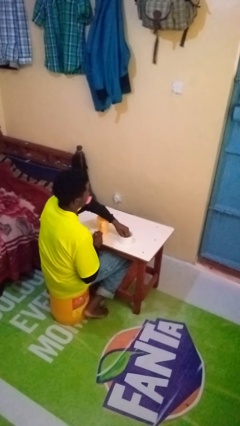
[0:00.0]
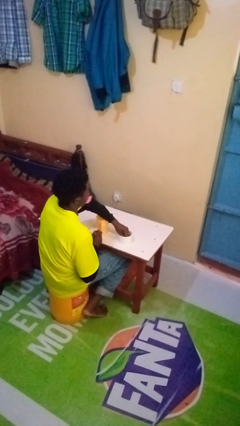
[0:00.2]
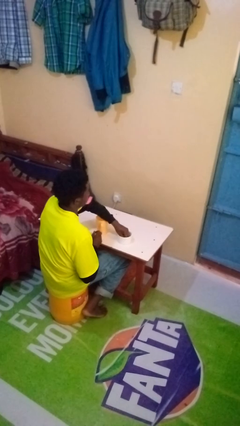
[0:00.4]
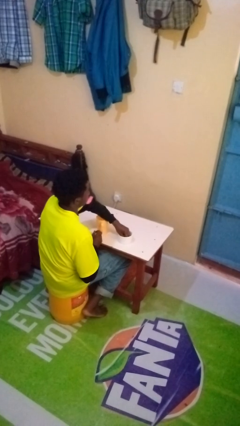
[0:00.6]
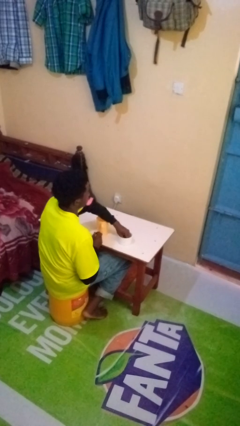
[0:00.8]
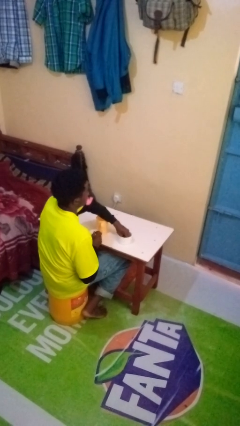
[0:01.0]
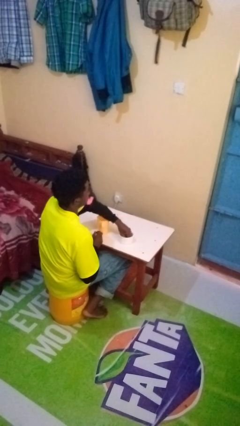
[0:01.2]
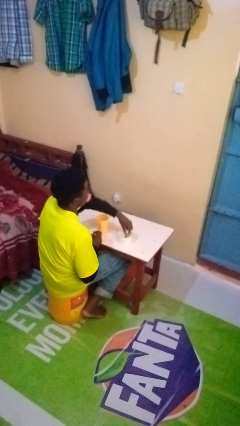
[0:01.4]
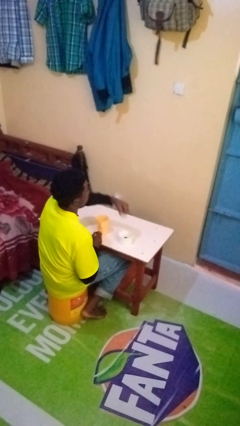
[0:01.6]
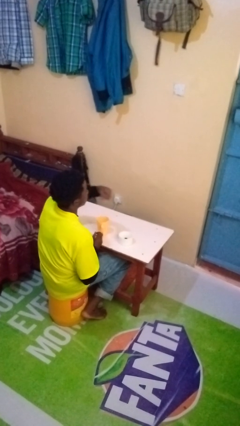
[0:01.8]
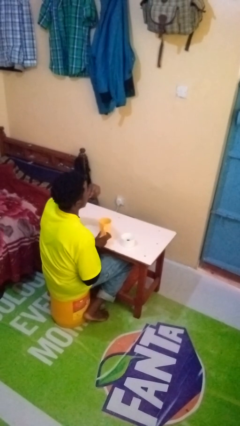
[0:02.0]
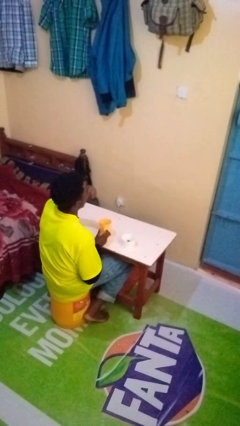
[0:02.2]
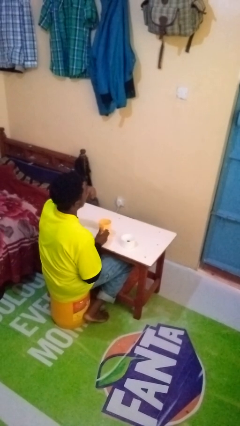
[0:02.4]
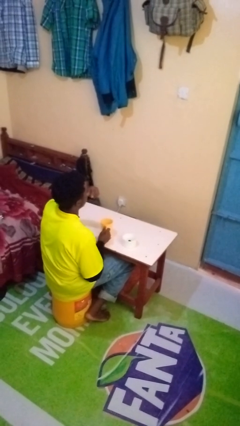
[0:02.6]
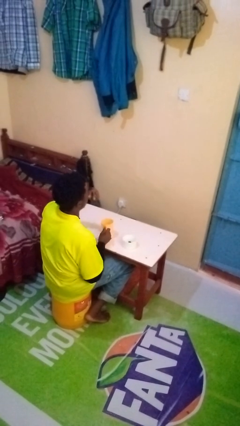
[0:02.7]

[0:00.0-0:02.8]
person takes medicine pills

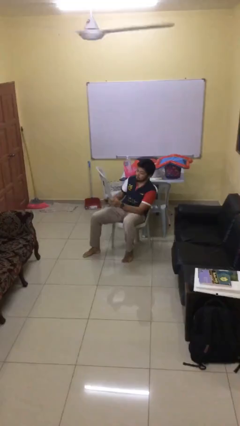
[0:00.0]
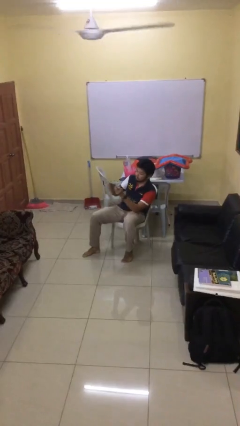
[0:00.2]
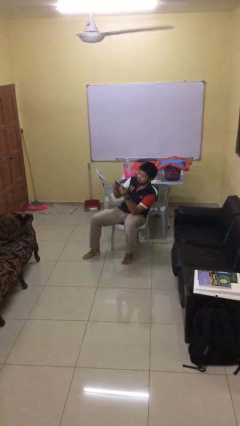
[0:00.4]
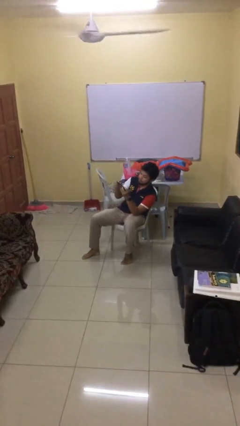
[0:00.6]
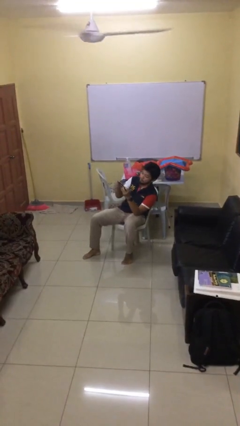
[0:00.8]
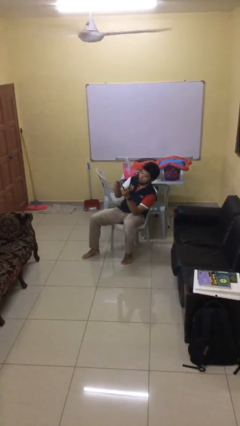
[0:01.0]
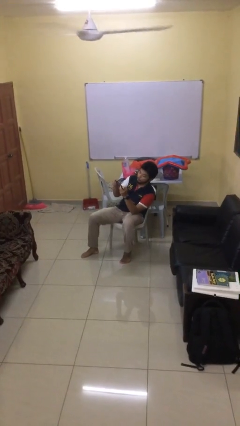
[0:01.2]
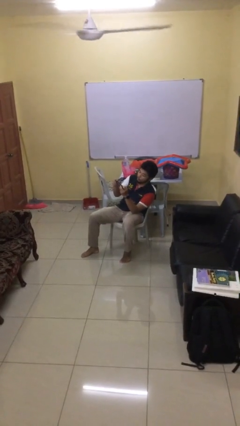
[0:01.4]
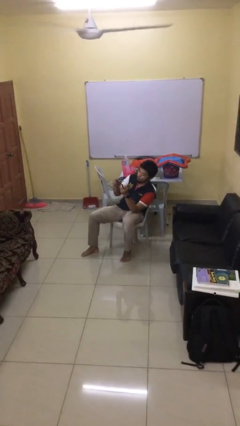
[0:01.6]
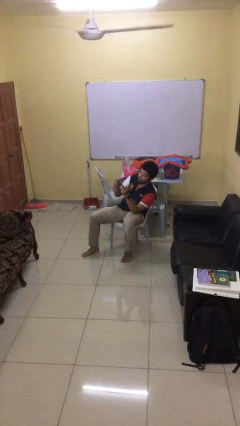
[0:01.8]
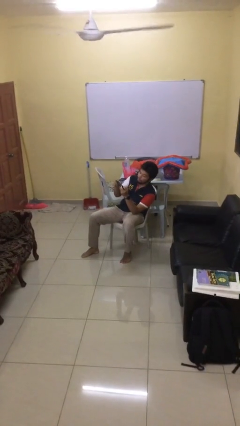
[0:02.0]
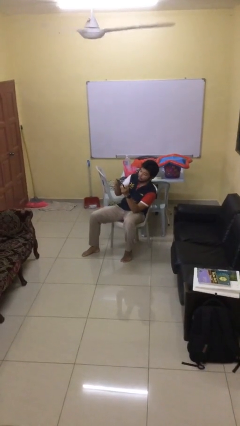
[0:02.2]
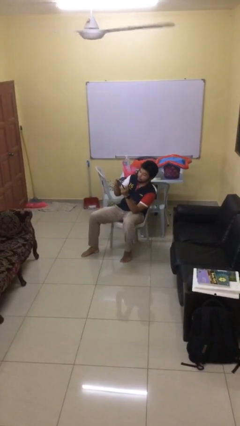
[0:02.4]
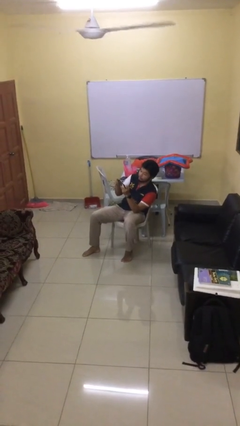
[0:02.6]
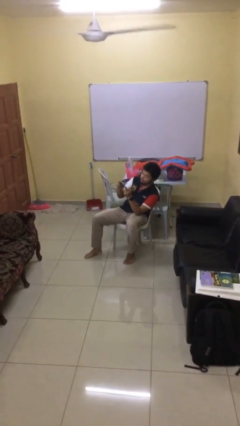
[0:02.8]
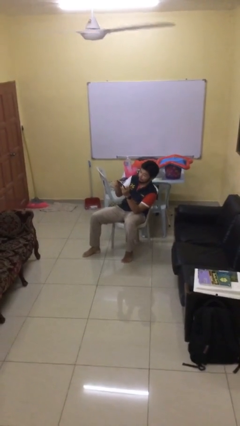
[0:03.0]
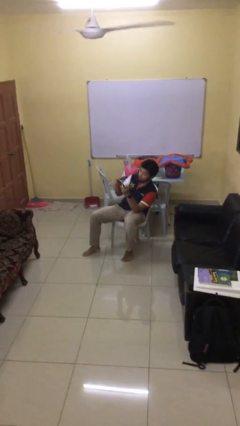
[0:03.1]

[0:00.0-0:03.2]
person interacts with handheld game

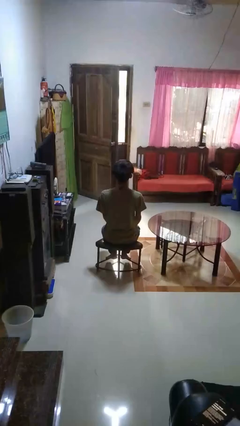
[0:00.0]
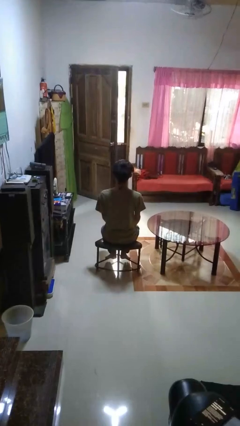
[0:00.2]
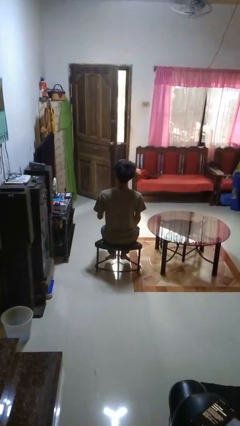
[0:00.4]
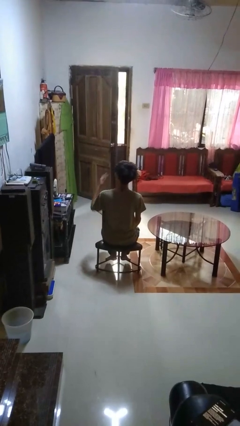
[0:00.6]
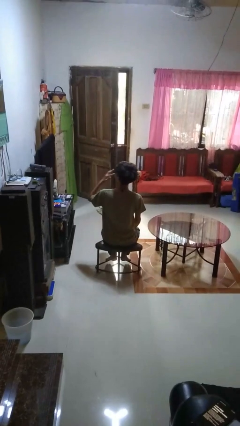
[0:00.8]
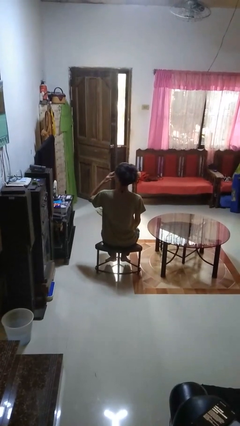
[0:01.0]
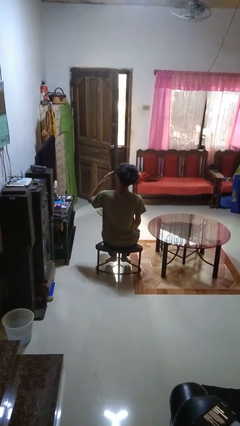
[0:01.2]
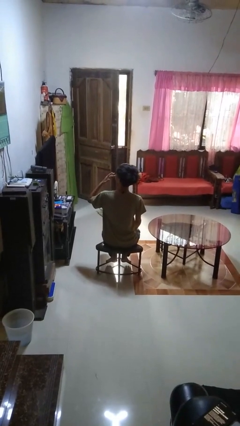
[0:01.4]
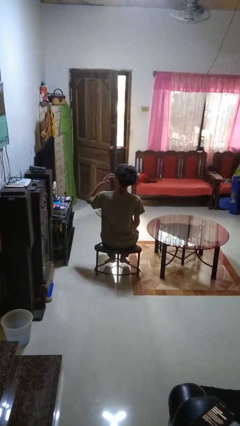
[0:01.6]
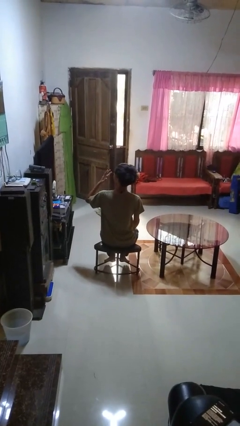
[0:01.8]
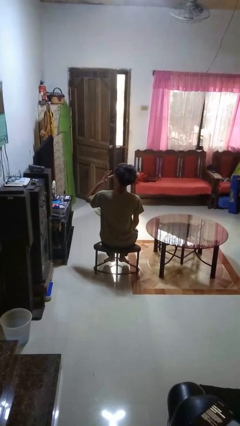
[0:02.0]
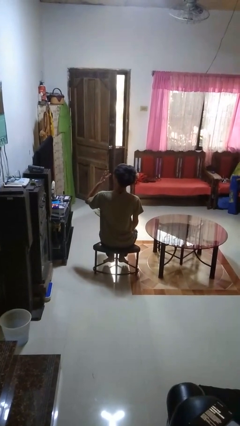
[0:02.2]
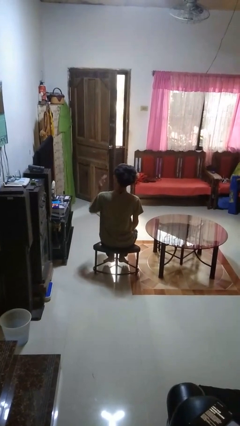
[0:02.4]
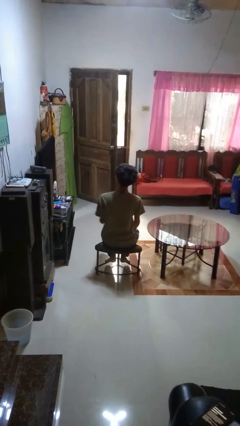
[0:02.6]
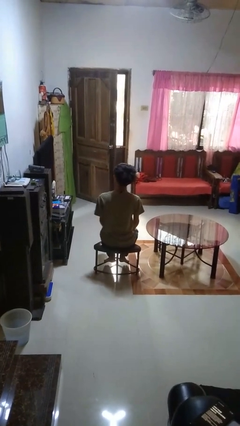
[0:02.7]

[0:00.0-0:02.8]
person licks fingers

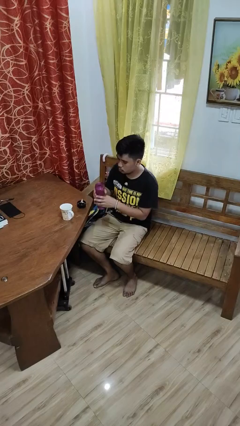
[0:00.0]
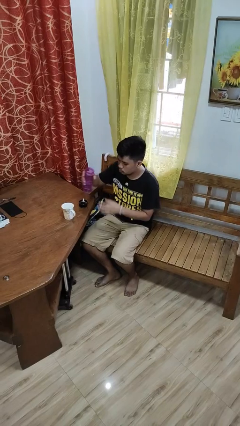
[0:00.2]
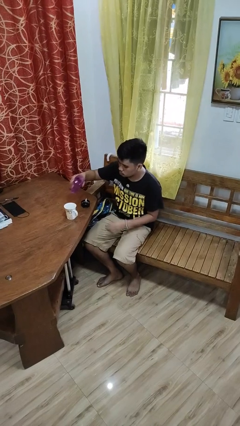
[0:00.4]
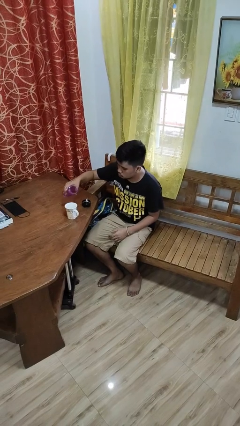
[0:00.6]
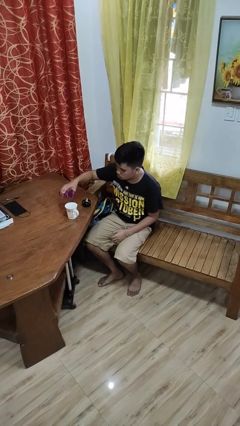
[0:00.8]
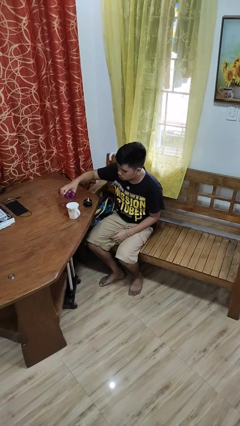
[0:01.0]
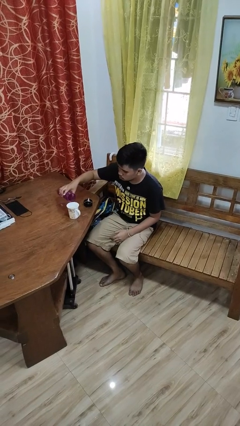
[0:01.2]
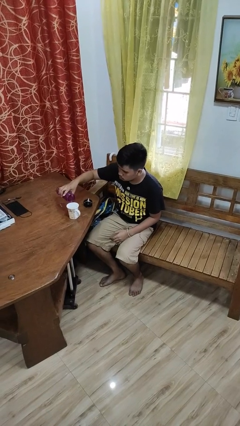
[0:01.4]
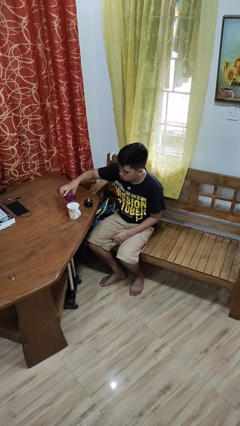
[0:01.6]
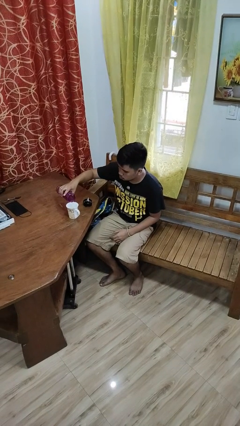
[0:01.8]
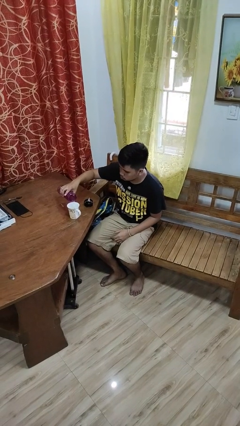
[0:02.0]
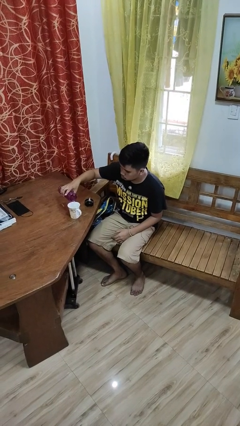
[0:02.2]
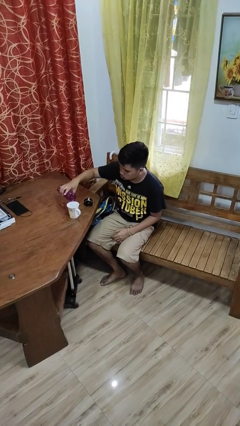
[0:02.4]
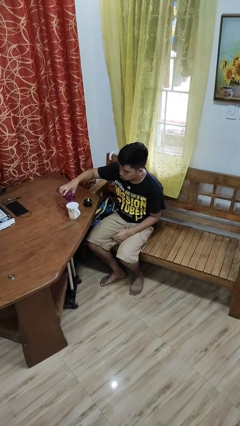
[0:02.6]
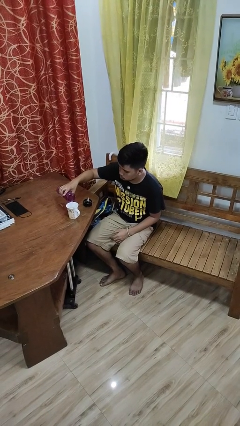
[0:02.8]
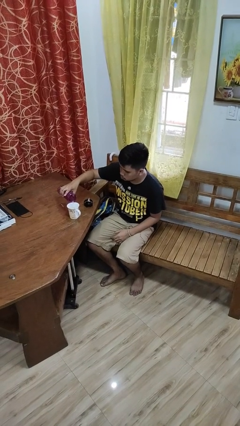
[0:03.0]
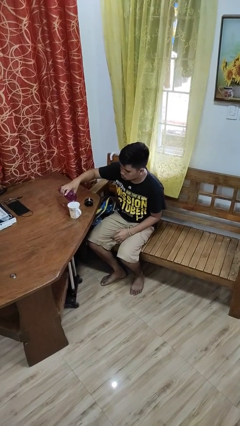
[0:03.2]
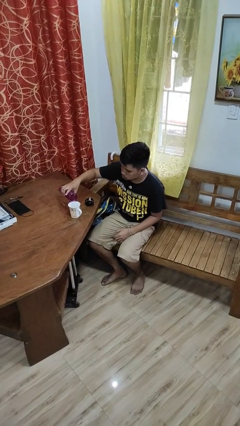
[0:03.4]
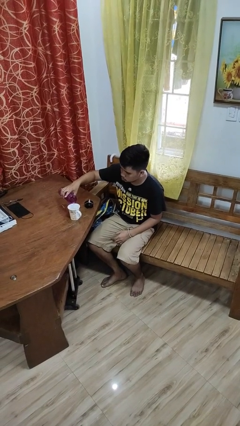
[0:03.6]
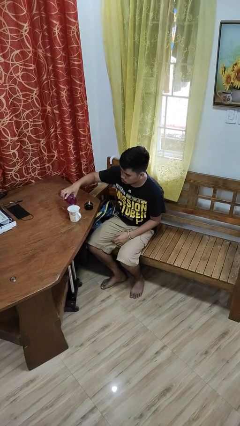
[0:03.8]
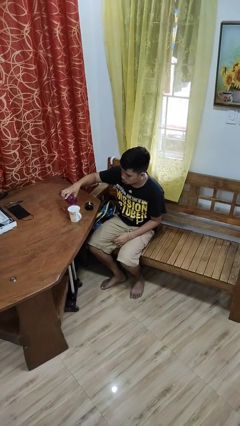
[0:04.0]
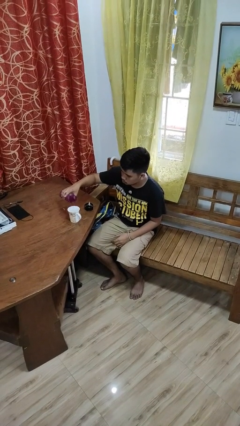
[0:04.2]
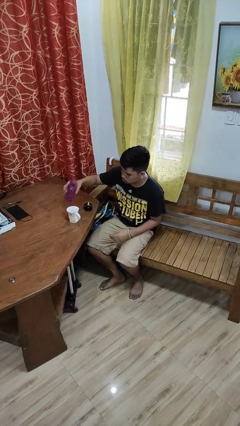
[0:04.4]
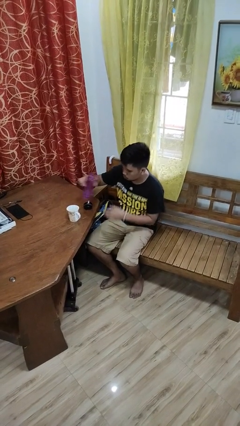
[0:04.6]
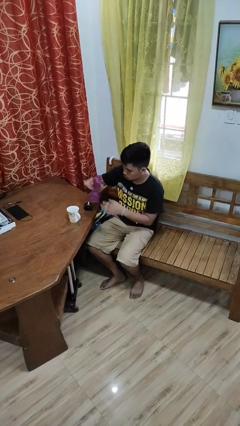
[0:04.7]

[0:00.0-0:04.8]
person pours liquid into cup

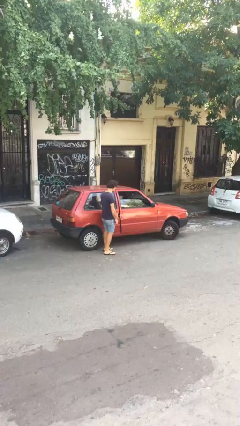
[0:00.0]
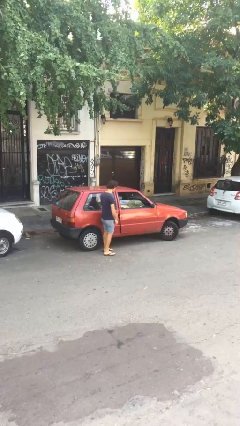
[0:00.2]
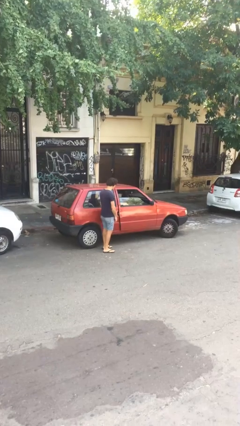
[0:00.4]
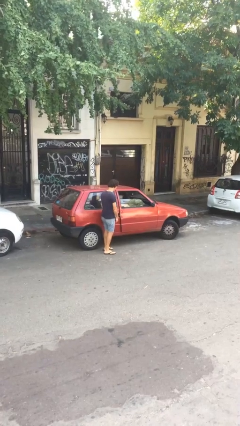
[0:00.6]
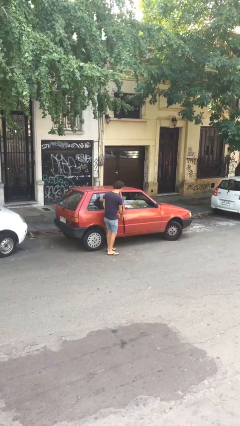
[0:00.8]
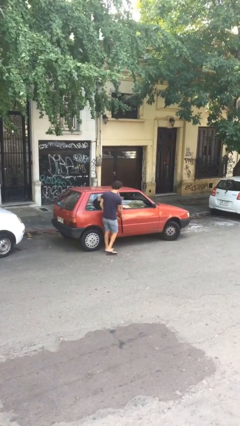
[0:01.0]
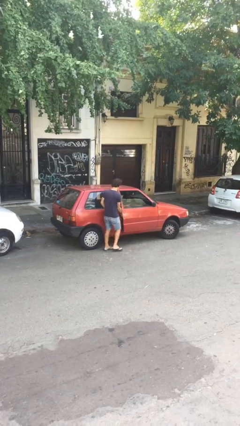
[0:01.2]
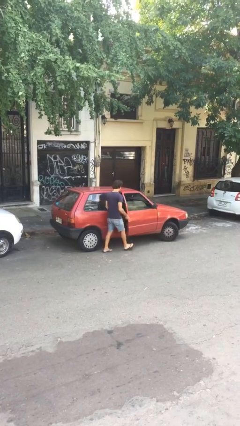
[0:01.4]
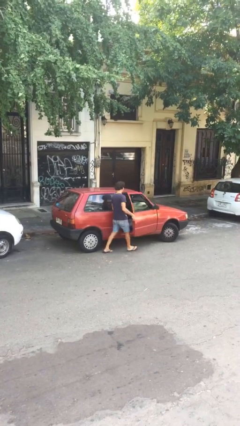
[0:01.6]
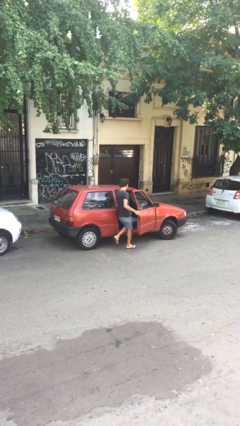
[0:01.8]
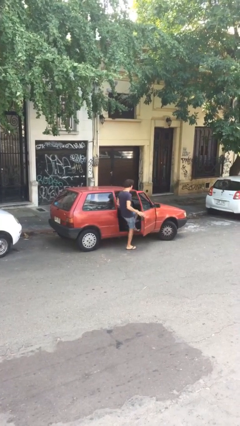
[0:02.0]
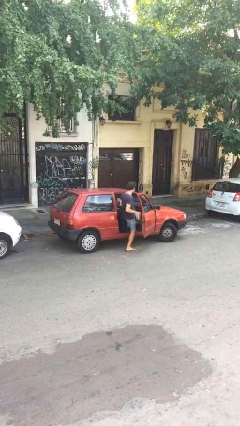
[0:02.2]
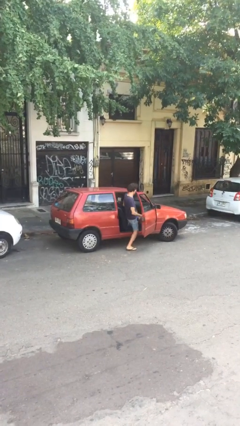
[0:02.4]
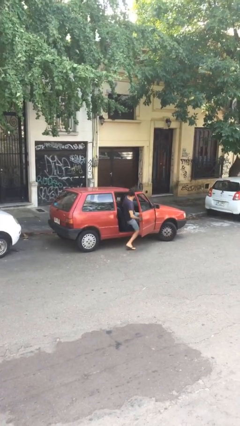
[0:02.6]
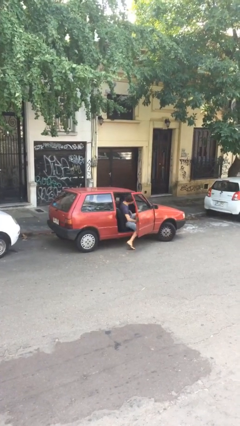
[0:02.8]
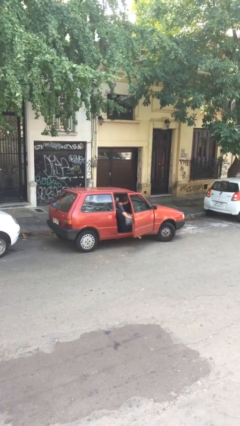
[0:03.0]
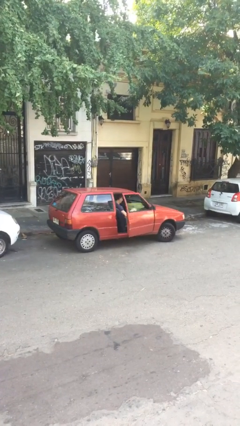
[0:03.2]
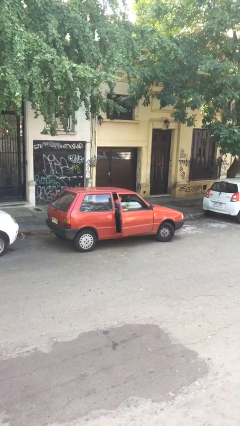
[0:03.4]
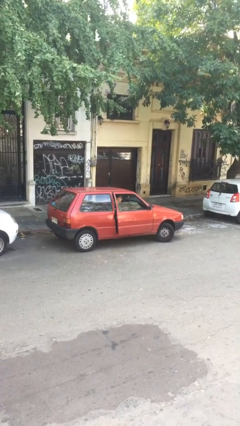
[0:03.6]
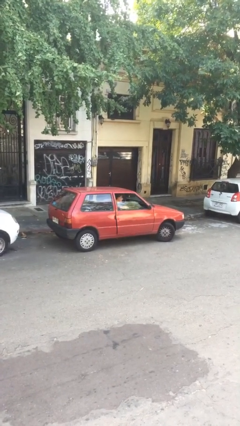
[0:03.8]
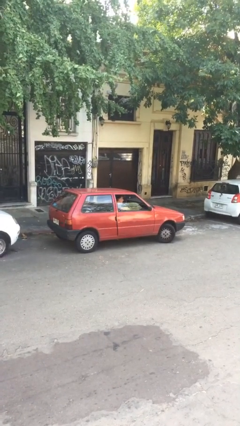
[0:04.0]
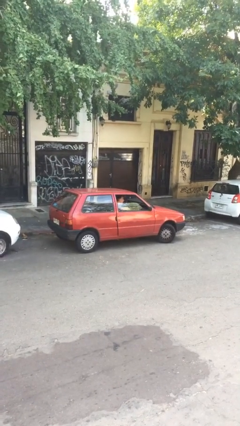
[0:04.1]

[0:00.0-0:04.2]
car picks up person
